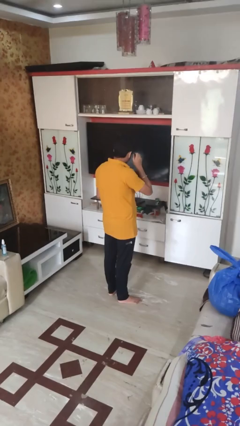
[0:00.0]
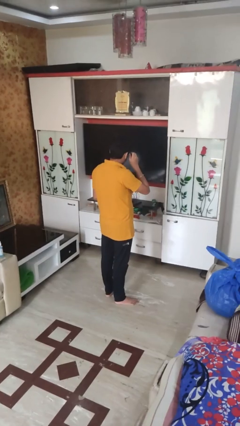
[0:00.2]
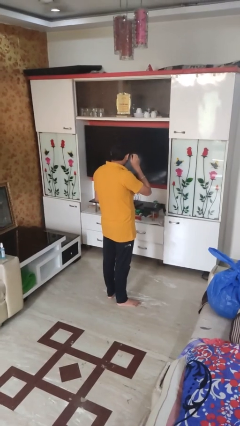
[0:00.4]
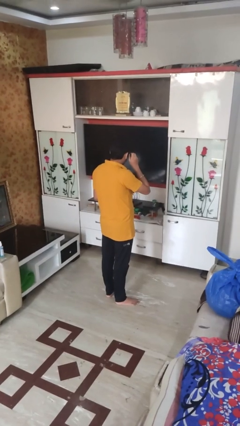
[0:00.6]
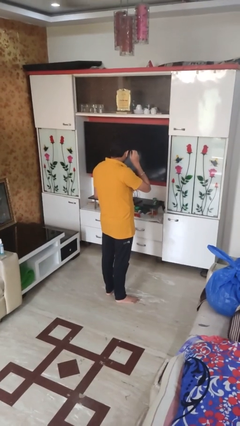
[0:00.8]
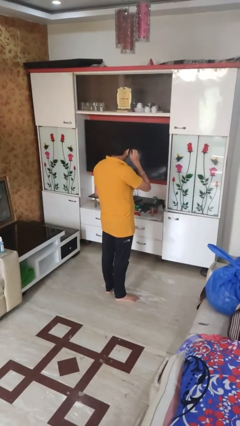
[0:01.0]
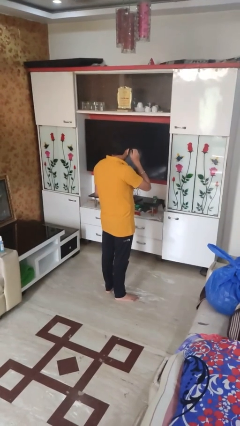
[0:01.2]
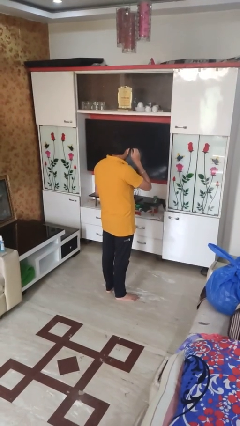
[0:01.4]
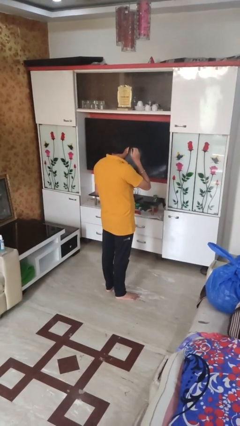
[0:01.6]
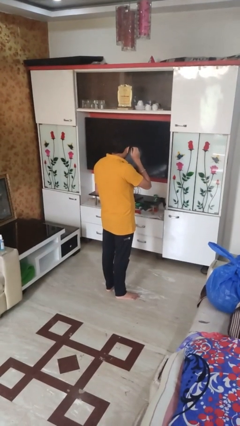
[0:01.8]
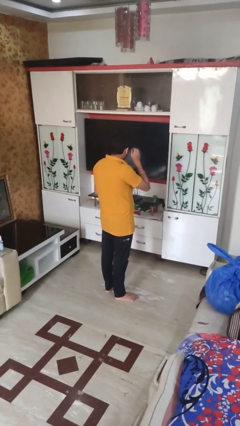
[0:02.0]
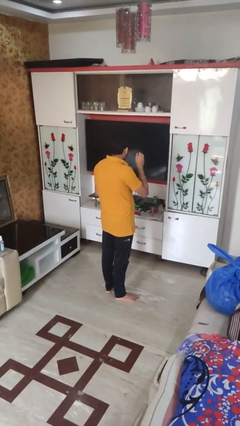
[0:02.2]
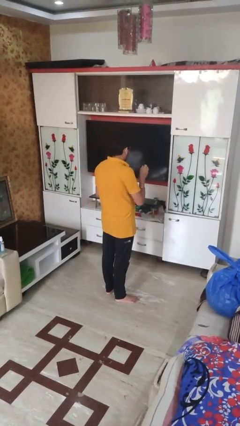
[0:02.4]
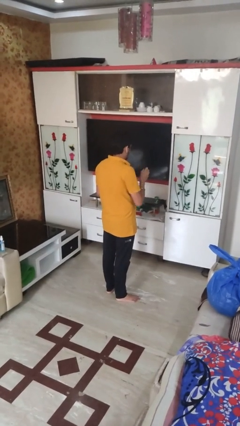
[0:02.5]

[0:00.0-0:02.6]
person applies eye makeup

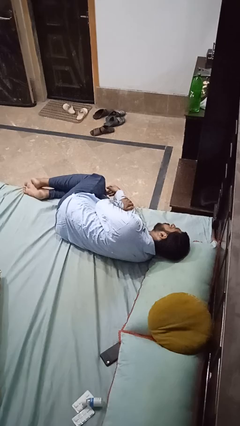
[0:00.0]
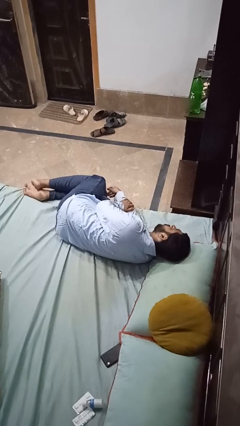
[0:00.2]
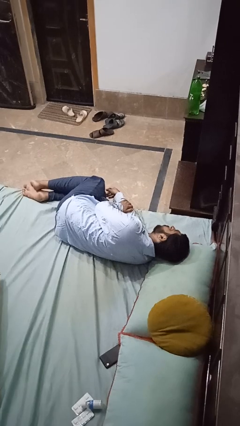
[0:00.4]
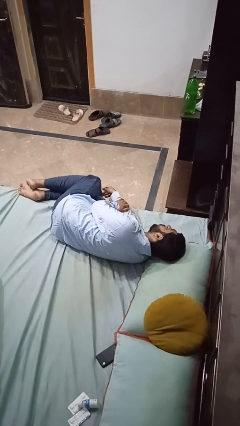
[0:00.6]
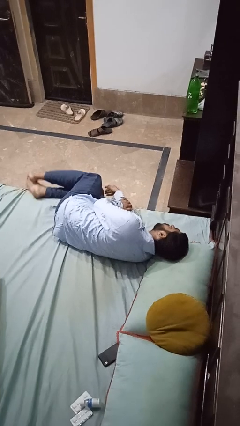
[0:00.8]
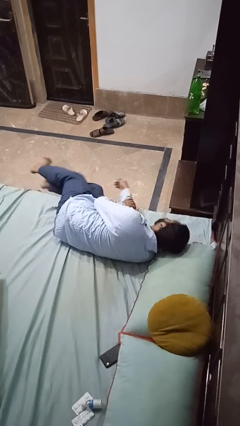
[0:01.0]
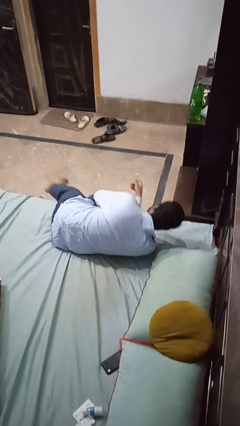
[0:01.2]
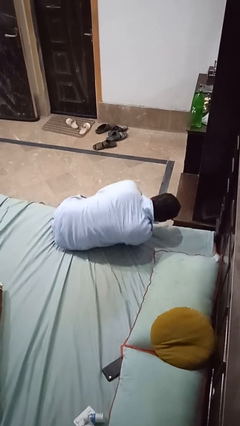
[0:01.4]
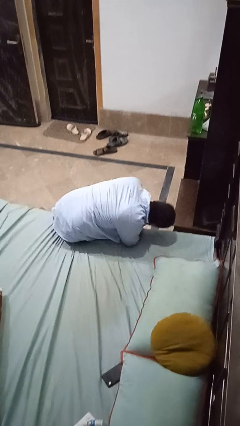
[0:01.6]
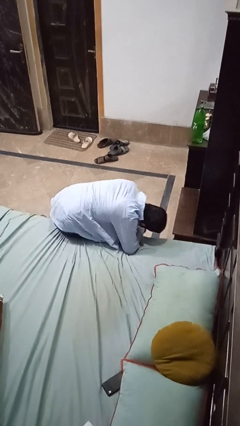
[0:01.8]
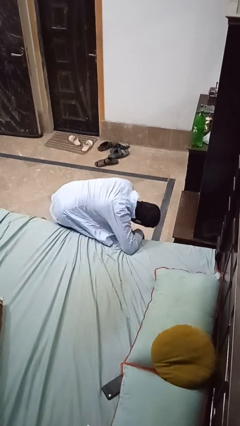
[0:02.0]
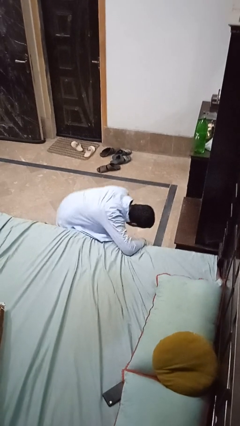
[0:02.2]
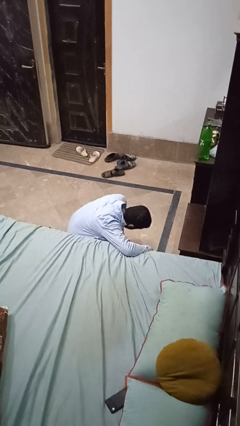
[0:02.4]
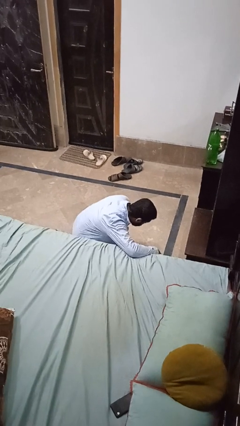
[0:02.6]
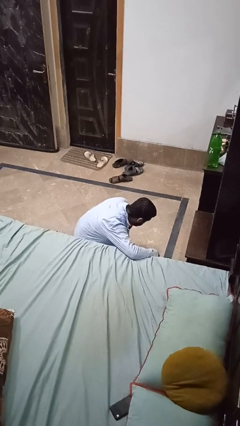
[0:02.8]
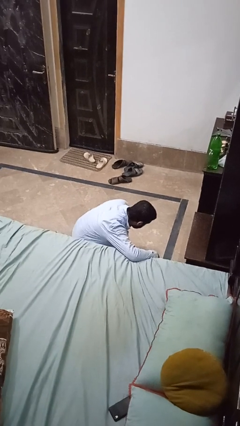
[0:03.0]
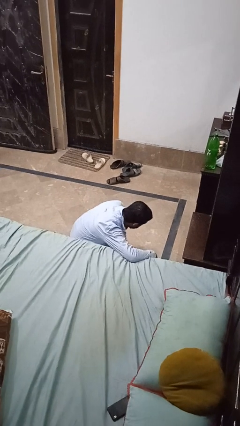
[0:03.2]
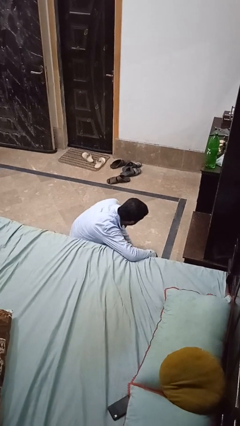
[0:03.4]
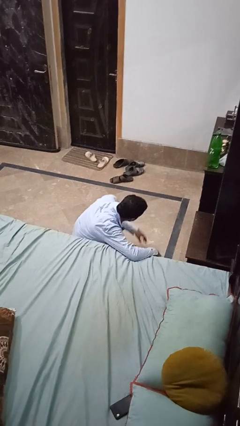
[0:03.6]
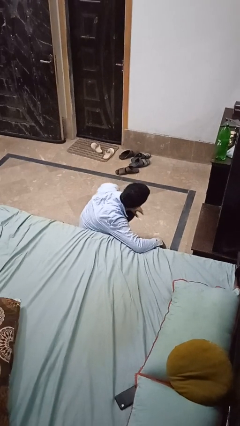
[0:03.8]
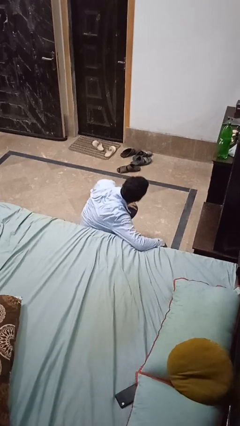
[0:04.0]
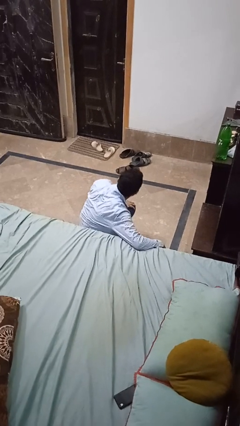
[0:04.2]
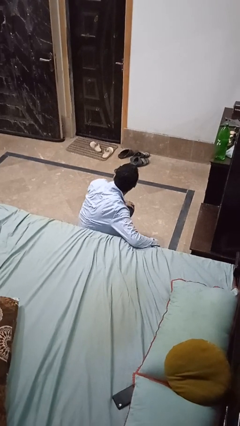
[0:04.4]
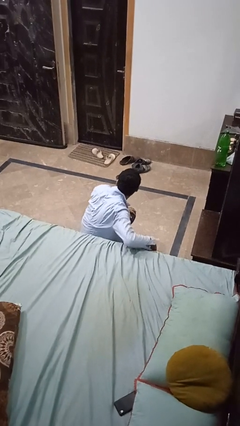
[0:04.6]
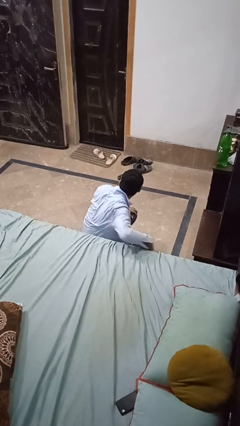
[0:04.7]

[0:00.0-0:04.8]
person falls from bed

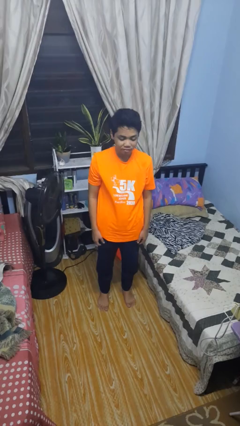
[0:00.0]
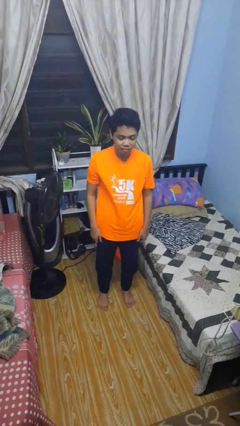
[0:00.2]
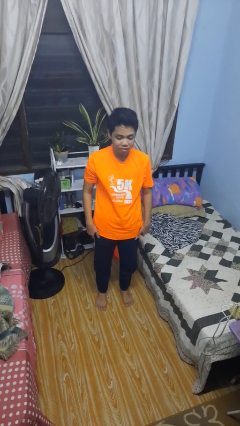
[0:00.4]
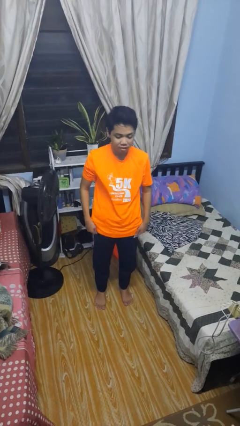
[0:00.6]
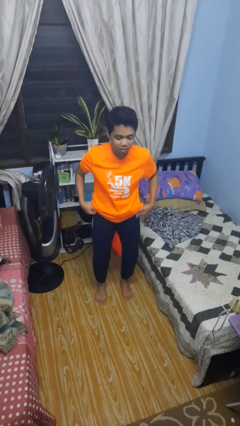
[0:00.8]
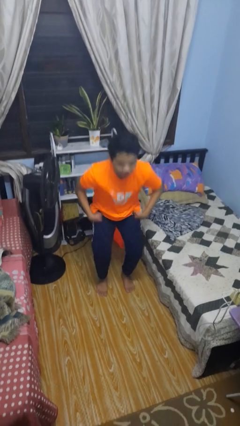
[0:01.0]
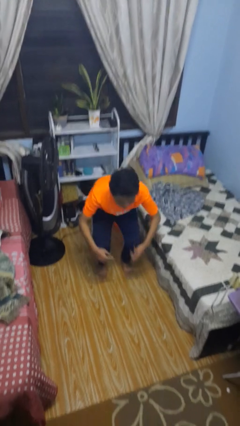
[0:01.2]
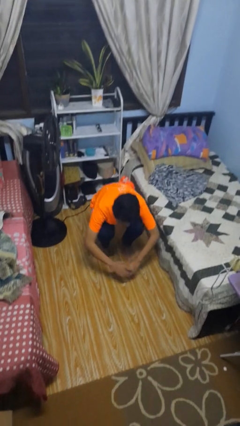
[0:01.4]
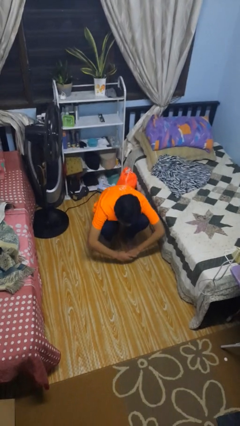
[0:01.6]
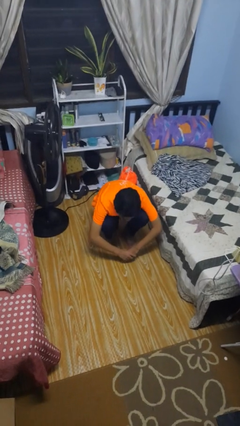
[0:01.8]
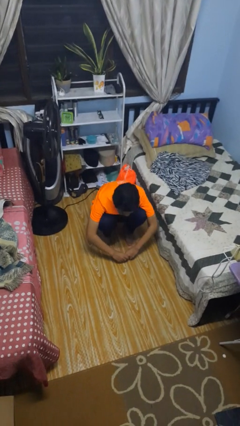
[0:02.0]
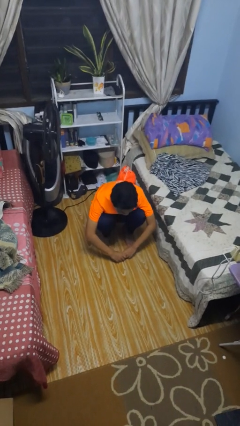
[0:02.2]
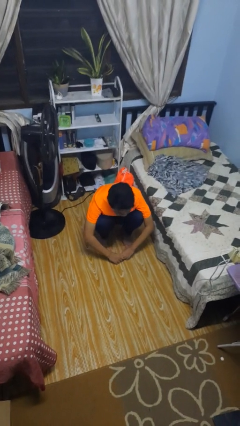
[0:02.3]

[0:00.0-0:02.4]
person squats

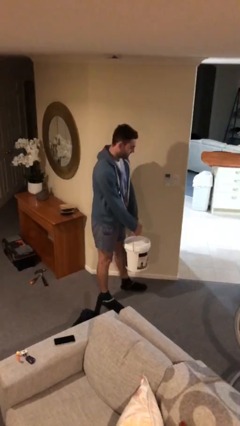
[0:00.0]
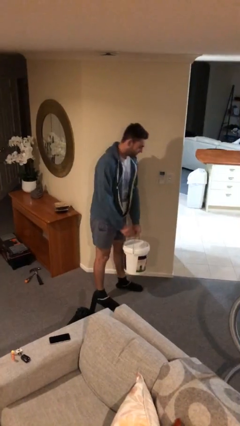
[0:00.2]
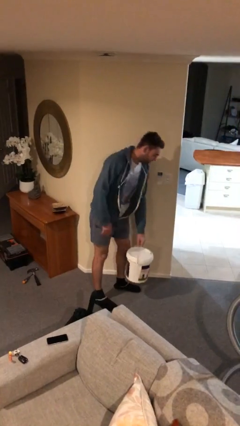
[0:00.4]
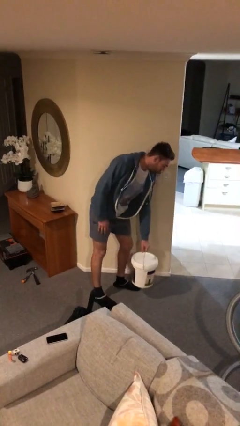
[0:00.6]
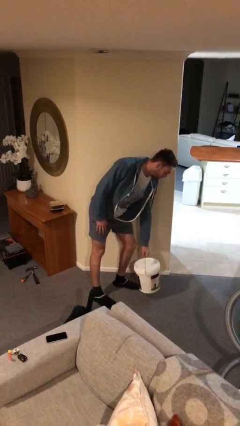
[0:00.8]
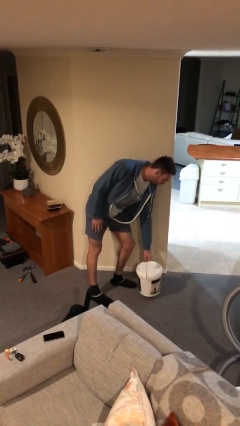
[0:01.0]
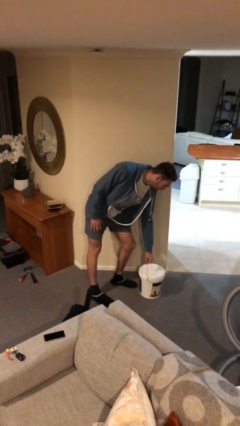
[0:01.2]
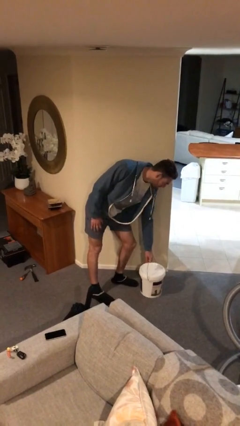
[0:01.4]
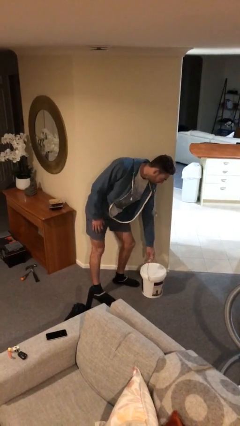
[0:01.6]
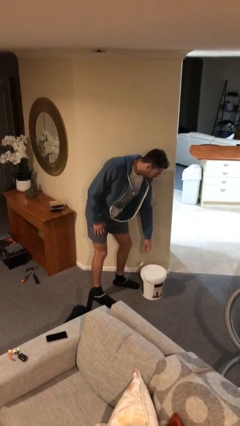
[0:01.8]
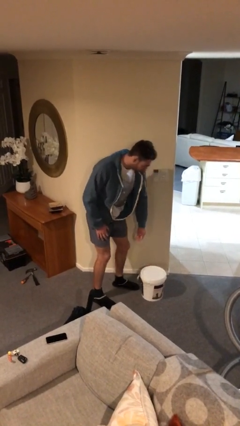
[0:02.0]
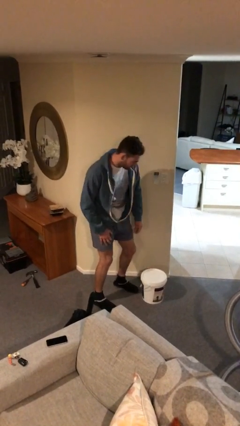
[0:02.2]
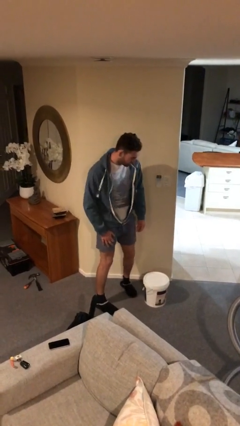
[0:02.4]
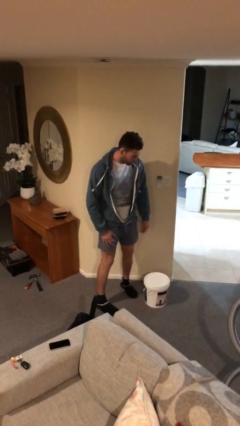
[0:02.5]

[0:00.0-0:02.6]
person puts down object on floor

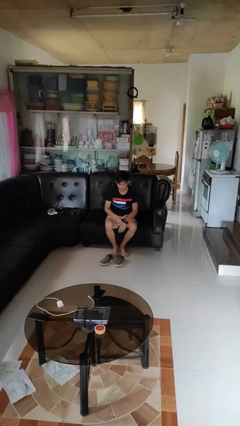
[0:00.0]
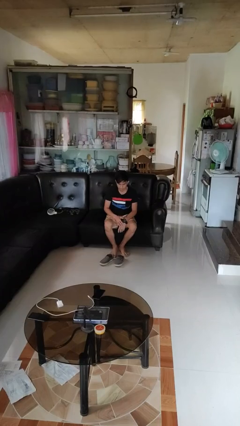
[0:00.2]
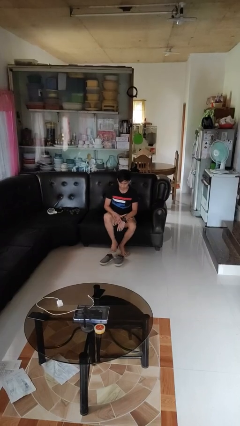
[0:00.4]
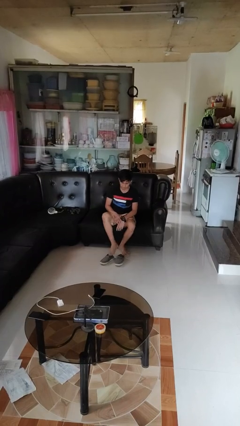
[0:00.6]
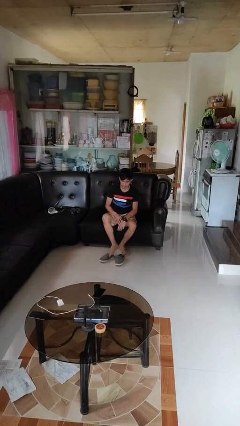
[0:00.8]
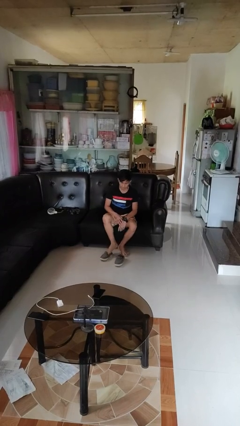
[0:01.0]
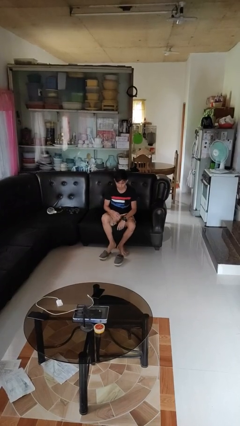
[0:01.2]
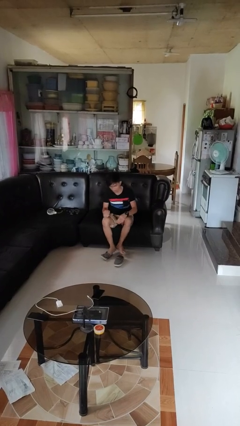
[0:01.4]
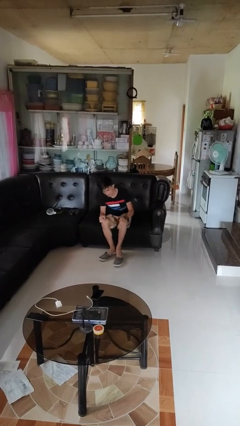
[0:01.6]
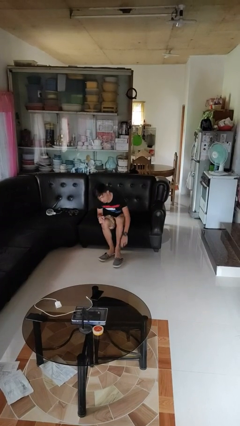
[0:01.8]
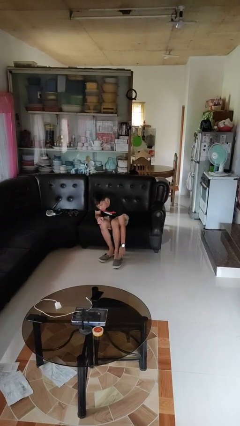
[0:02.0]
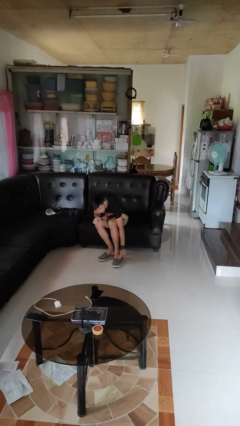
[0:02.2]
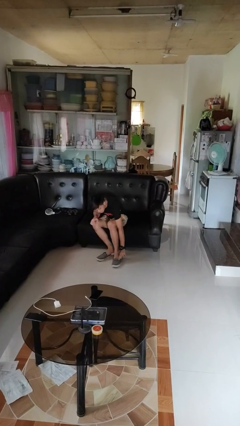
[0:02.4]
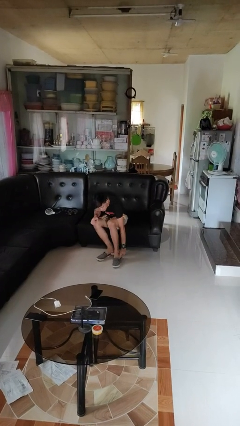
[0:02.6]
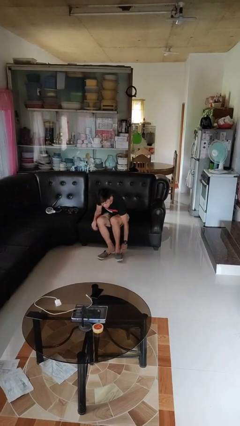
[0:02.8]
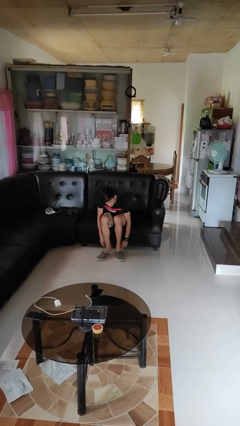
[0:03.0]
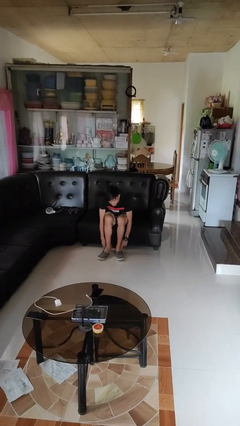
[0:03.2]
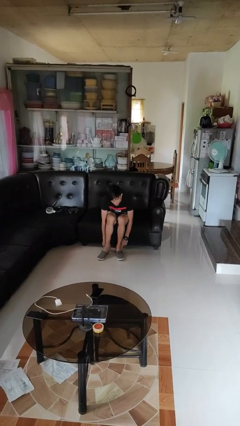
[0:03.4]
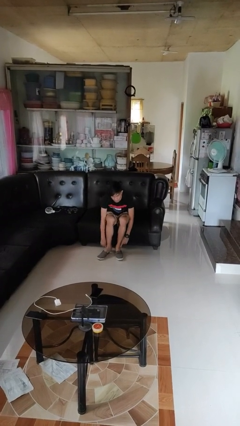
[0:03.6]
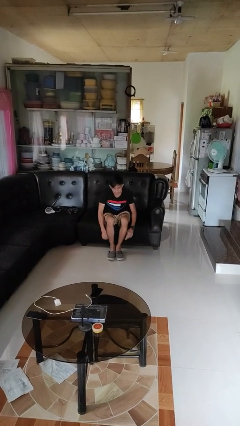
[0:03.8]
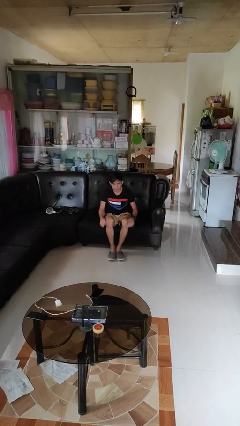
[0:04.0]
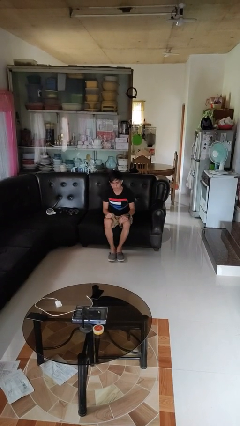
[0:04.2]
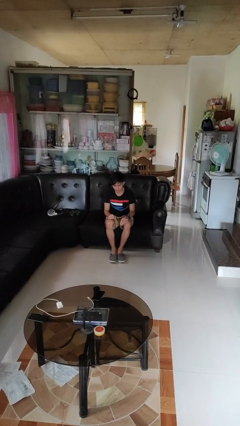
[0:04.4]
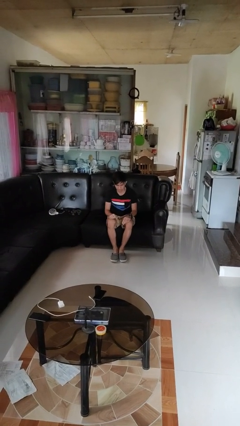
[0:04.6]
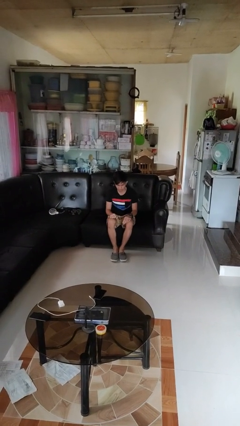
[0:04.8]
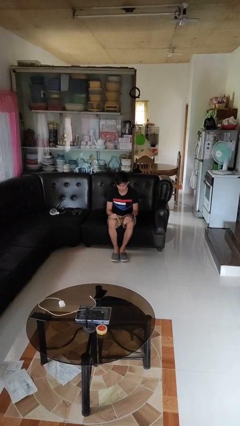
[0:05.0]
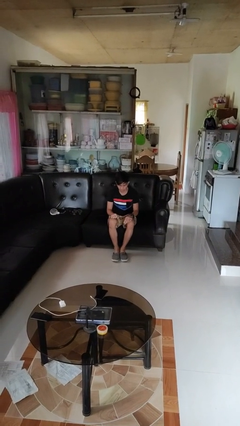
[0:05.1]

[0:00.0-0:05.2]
person puts on shoes
